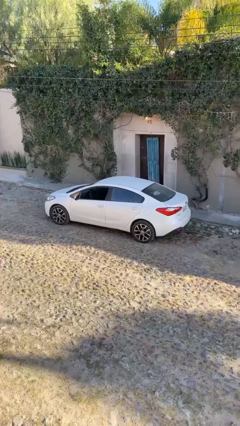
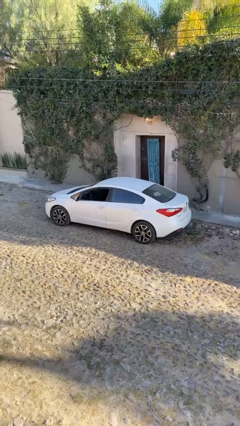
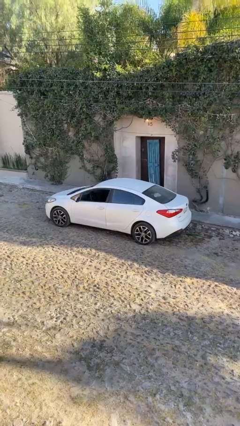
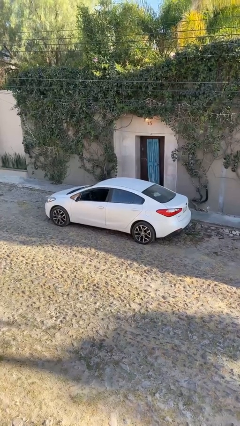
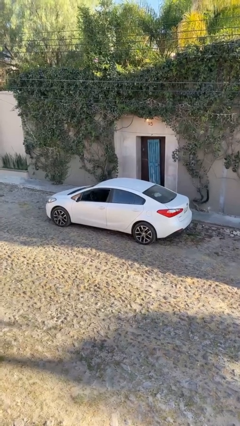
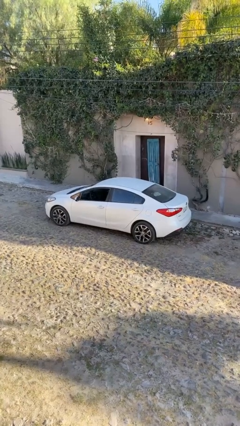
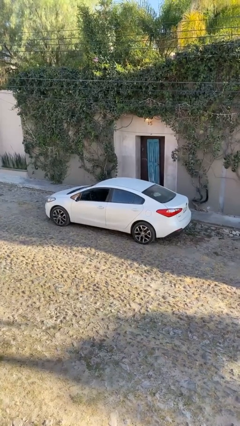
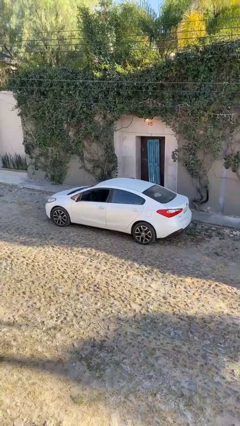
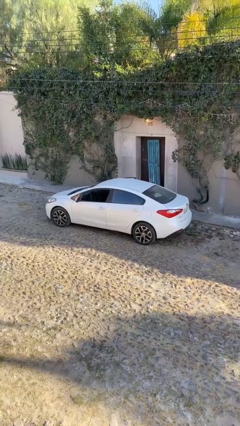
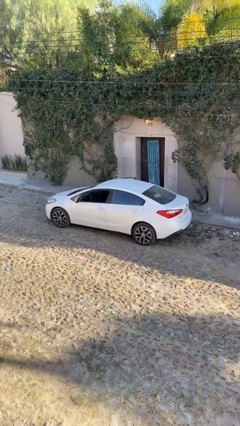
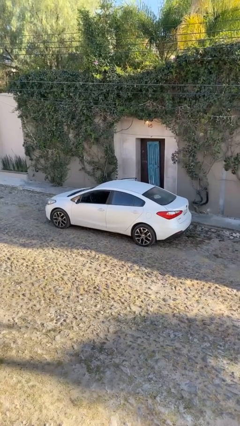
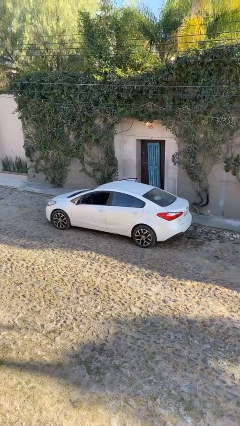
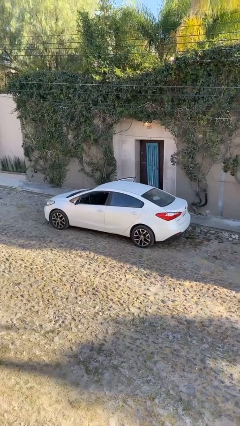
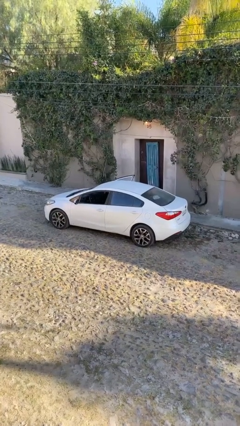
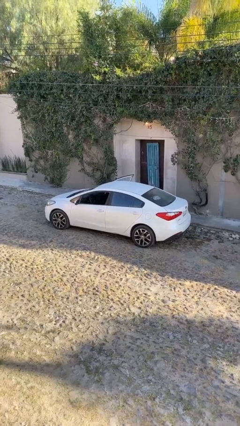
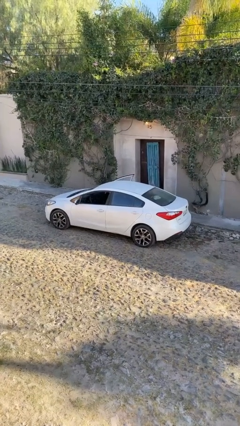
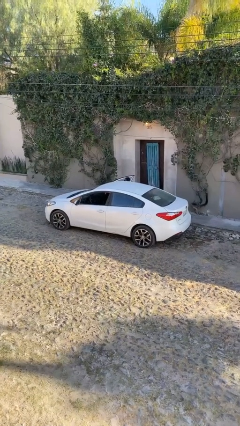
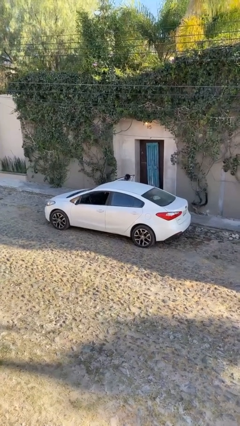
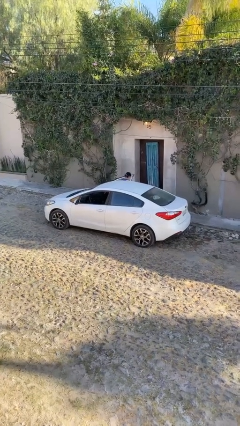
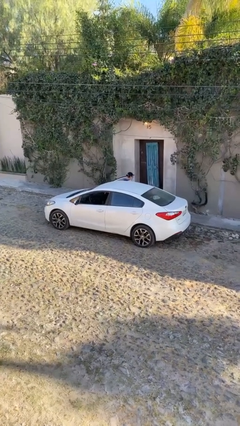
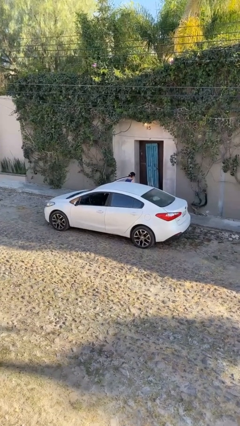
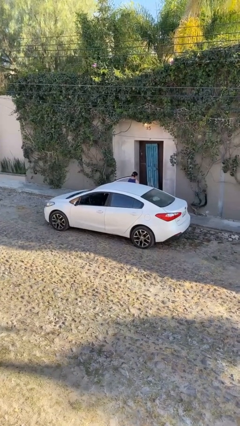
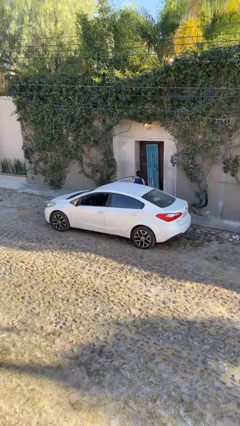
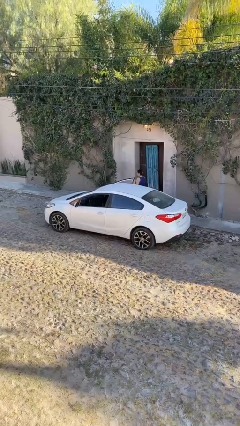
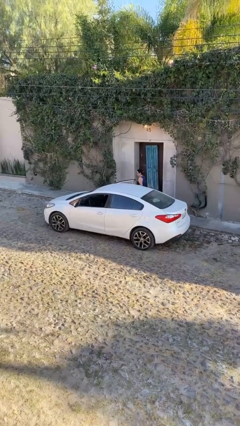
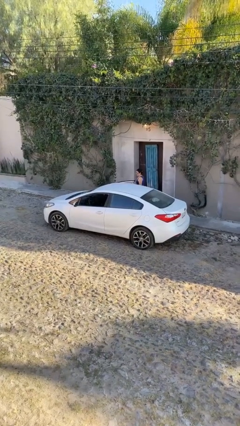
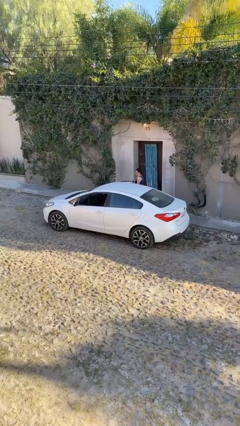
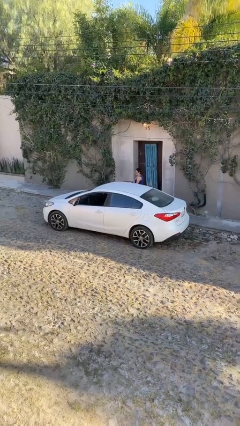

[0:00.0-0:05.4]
car drops off person

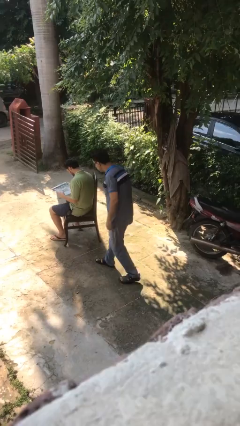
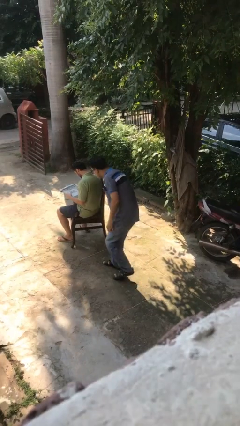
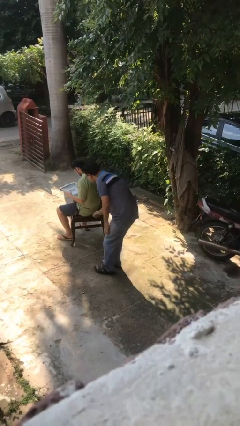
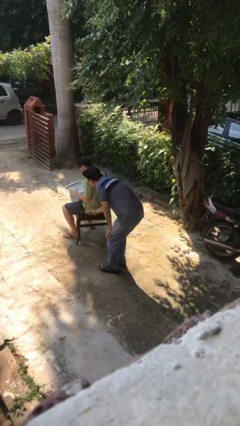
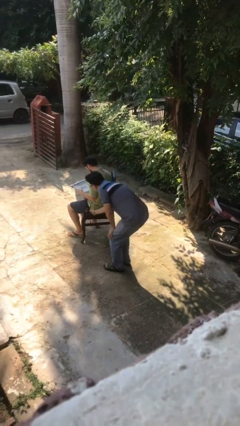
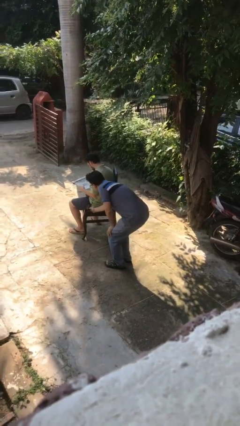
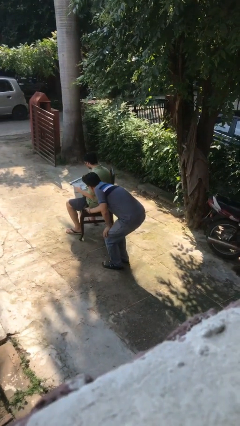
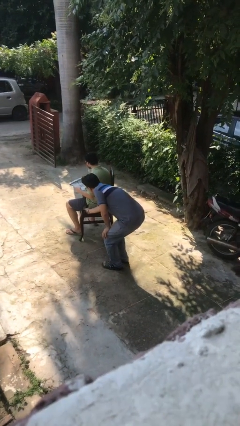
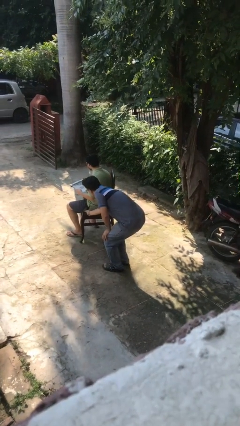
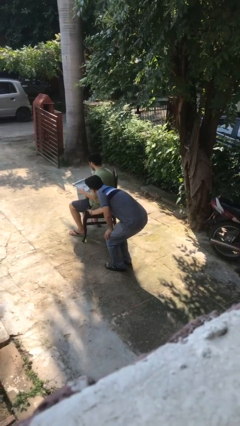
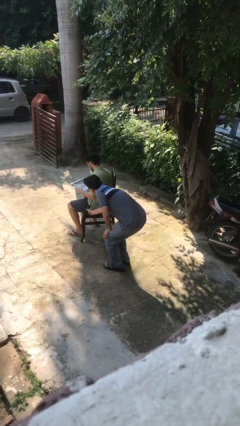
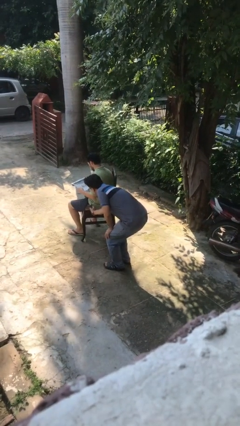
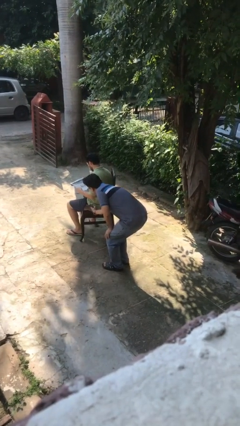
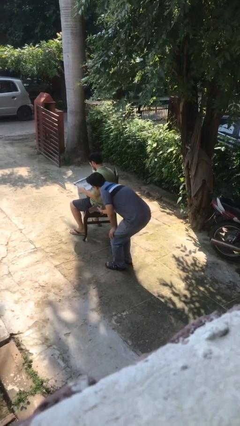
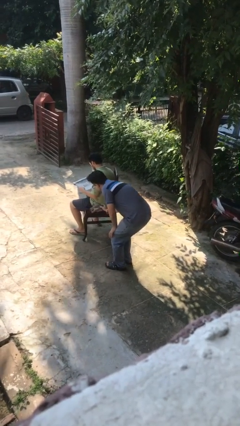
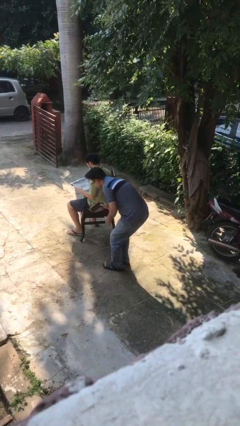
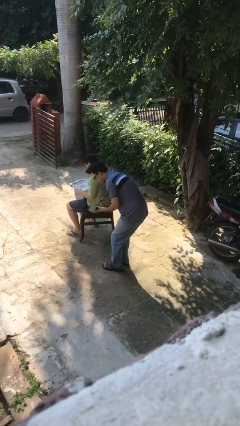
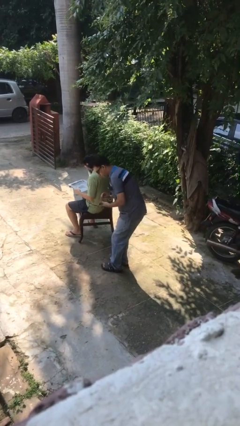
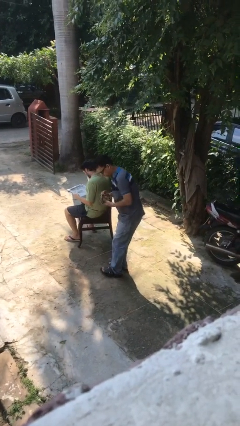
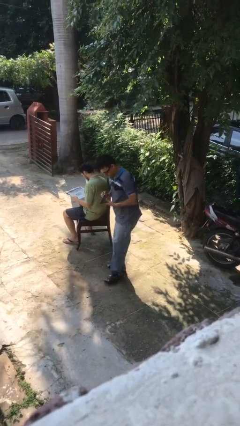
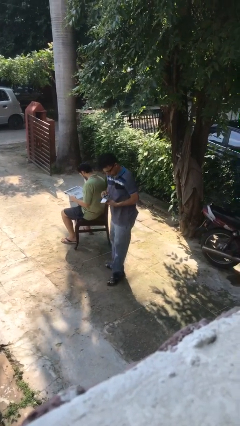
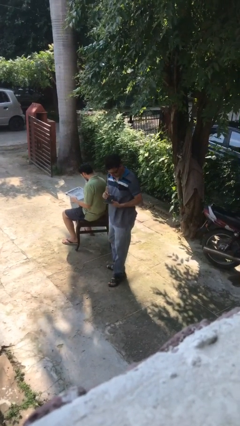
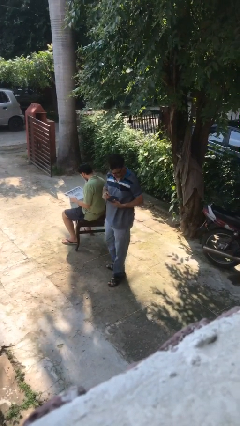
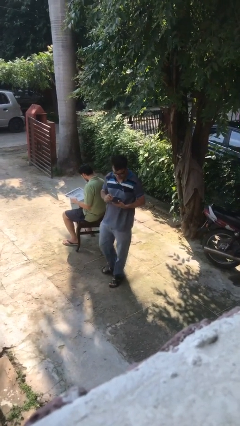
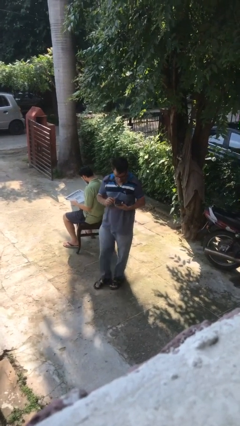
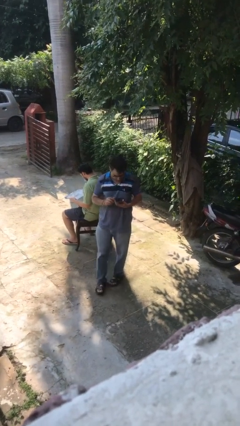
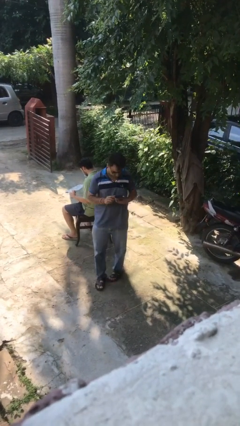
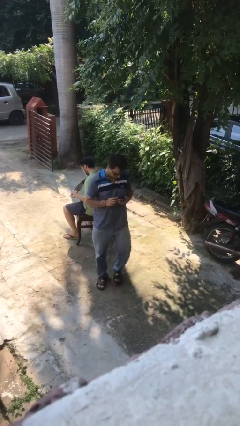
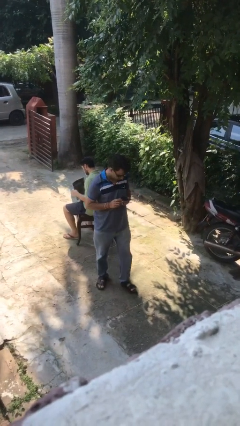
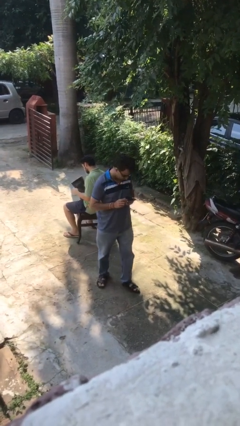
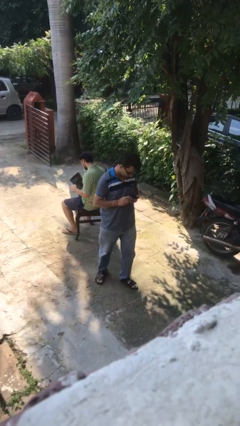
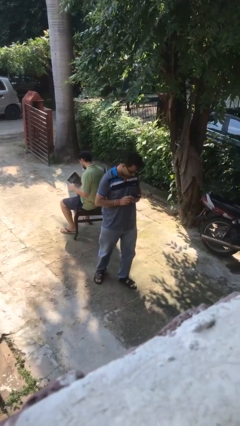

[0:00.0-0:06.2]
person steals object from person

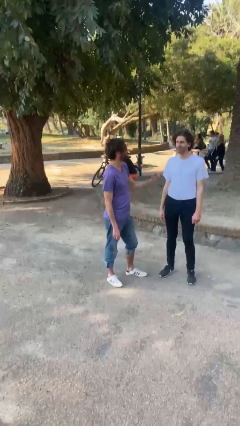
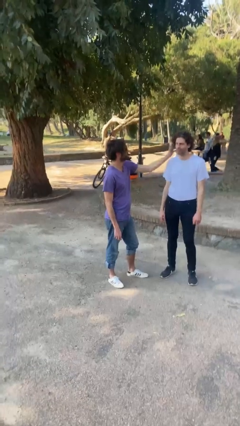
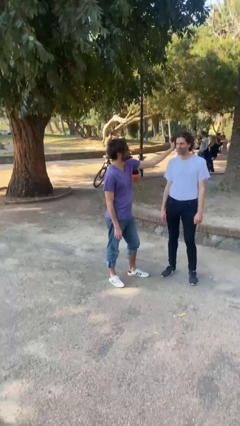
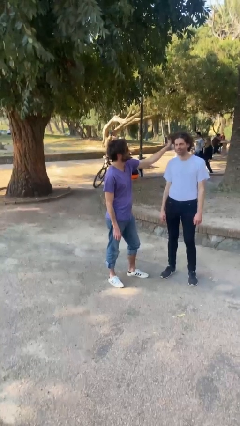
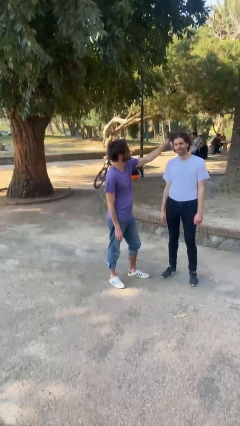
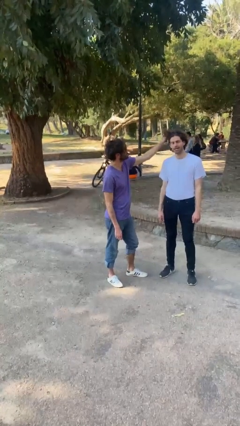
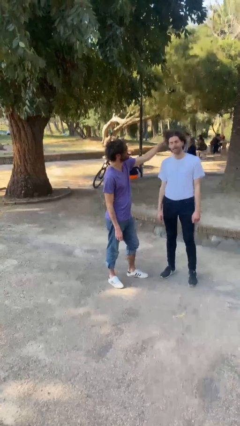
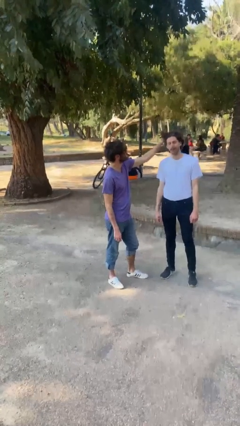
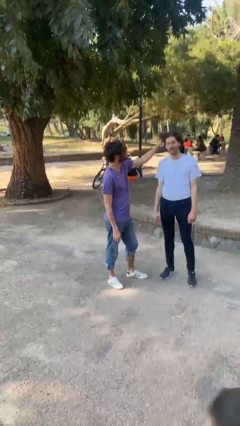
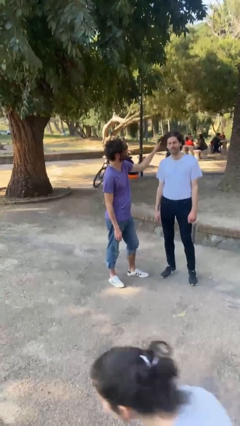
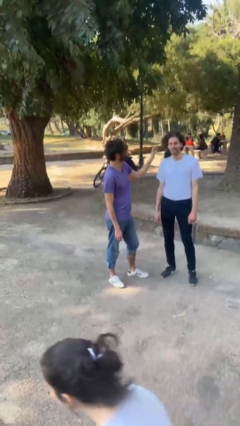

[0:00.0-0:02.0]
person grabs person by hair

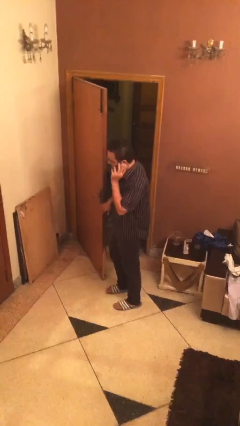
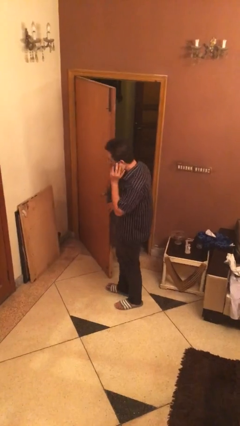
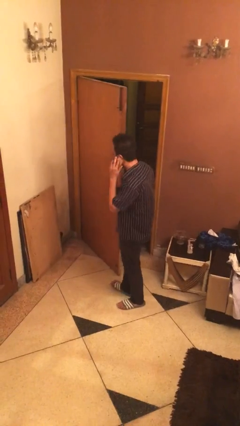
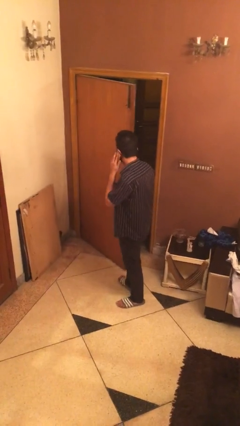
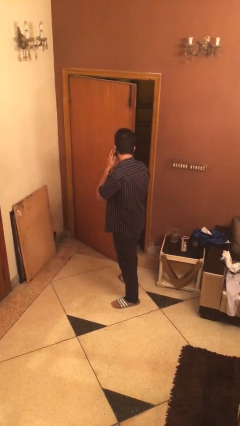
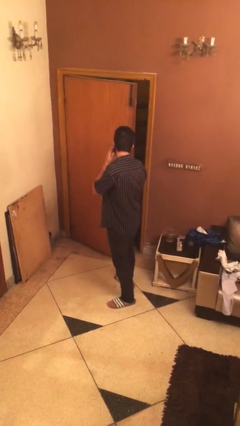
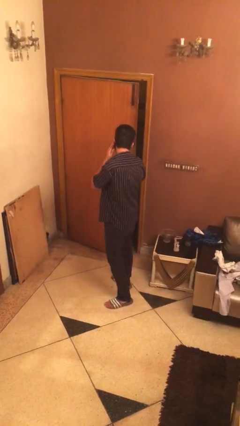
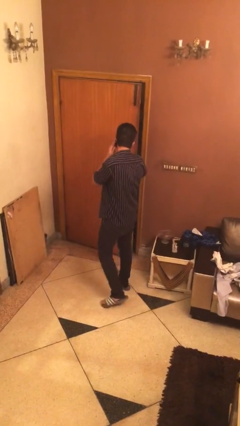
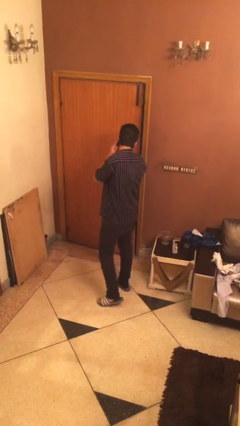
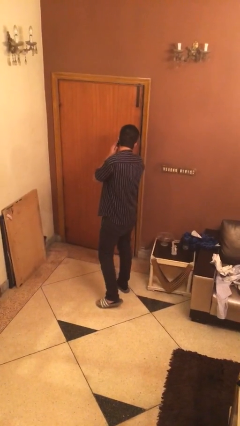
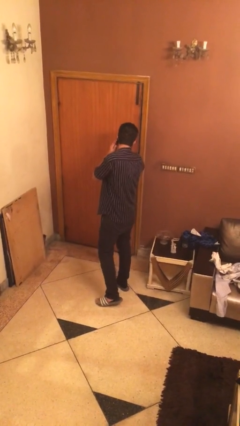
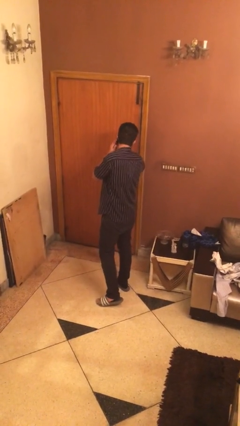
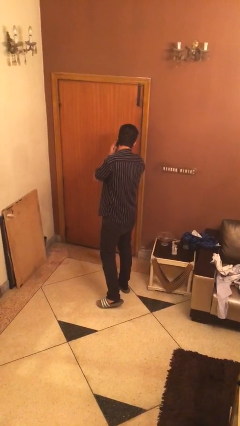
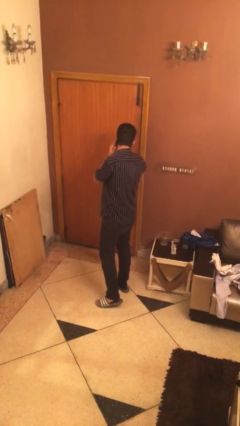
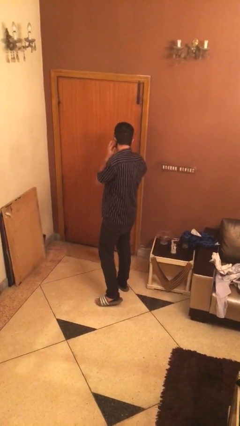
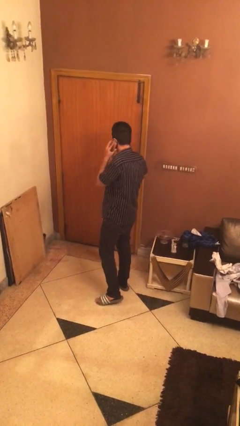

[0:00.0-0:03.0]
person closes facility door

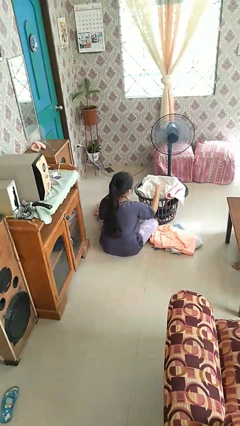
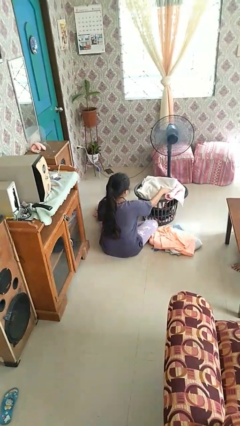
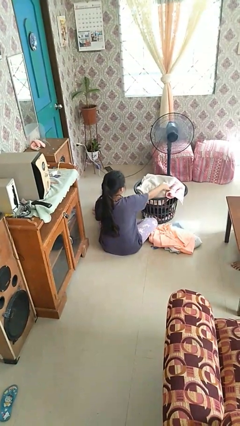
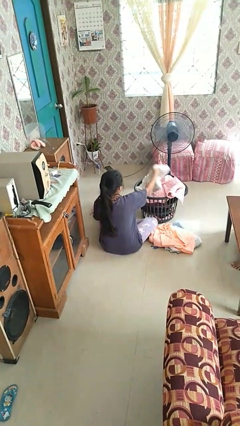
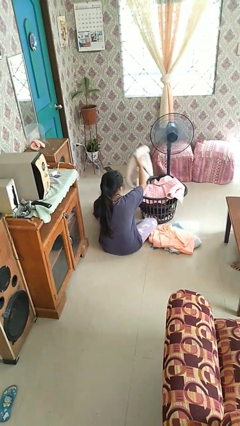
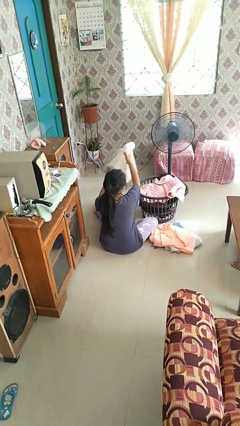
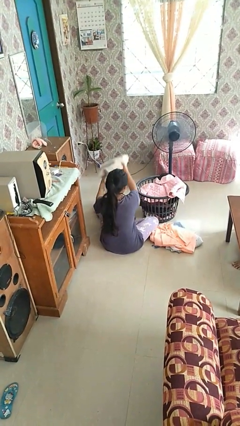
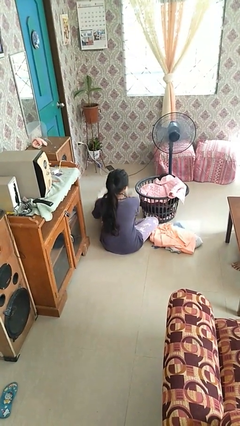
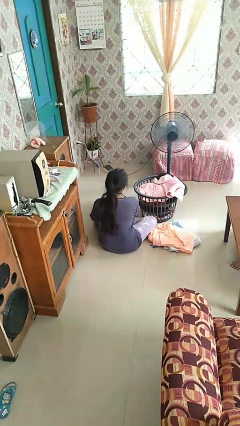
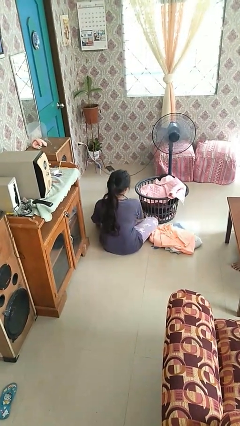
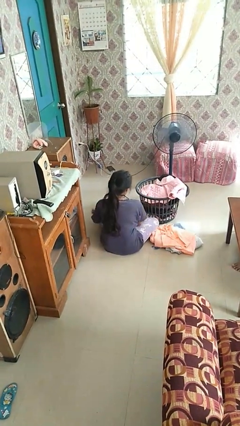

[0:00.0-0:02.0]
person takes object from basket
